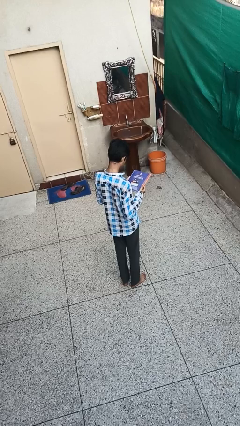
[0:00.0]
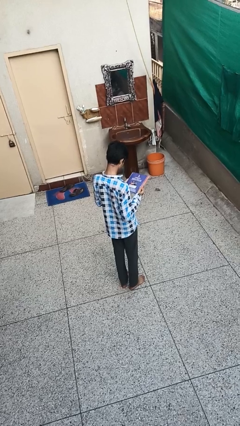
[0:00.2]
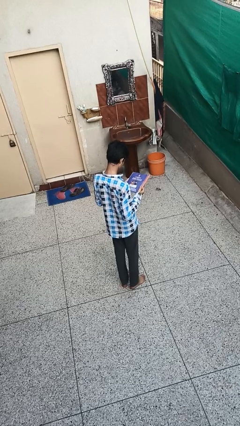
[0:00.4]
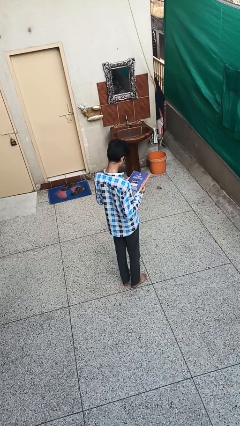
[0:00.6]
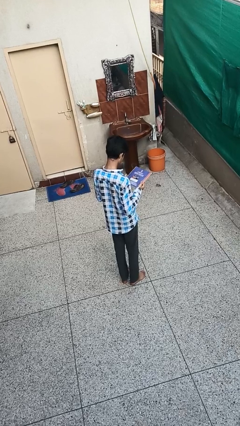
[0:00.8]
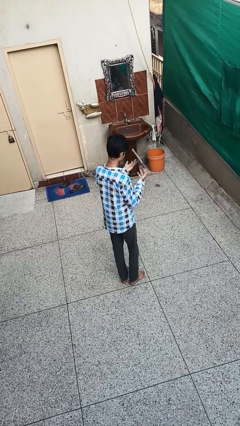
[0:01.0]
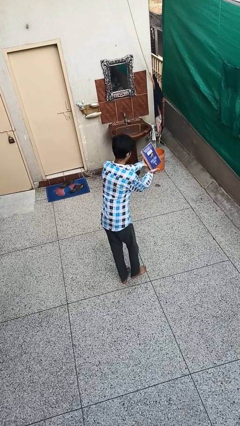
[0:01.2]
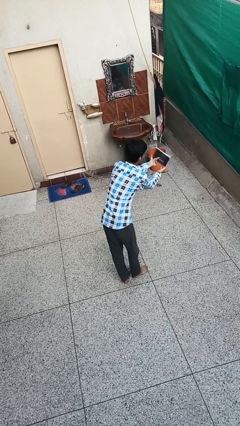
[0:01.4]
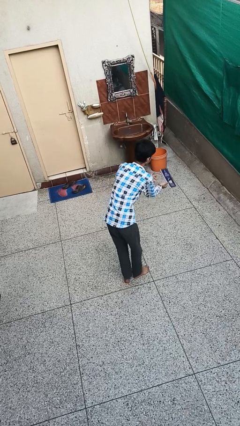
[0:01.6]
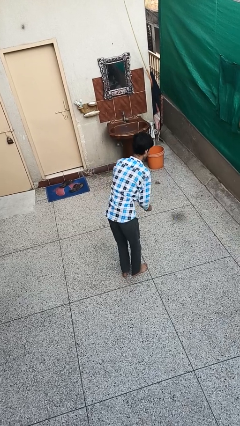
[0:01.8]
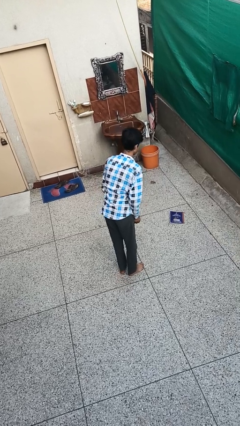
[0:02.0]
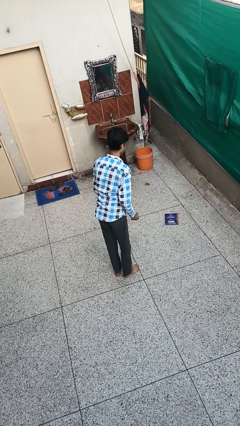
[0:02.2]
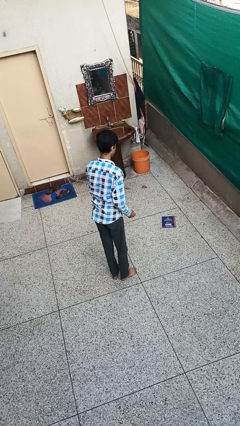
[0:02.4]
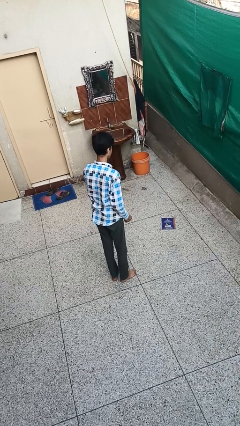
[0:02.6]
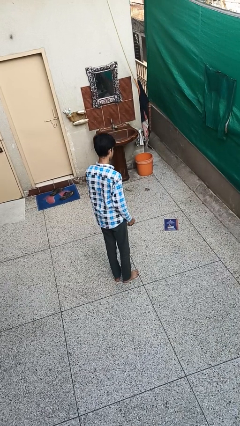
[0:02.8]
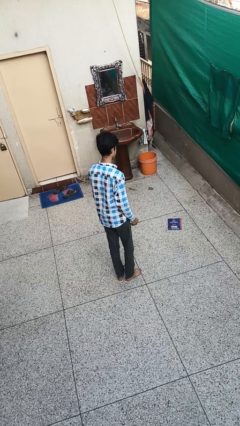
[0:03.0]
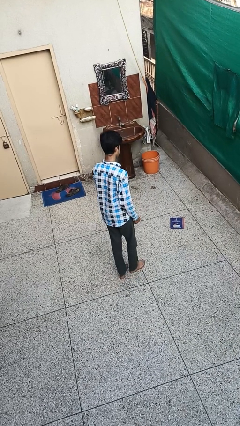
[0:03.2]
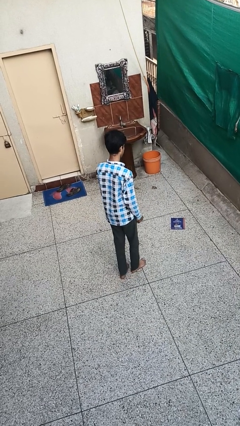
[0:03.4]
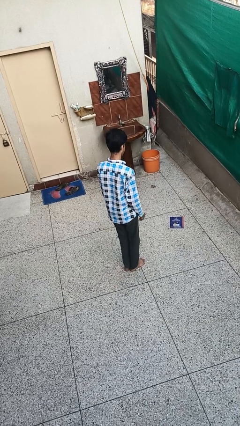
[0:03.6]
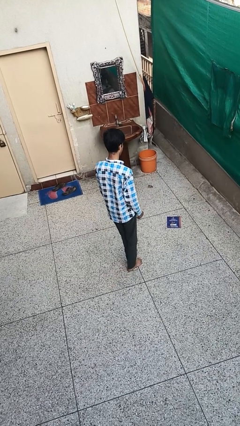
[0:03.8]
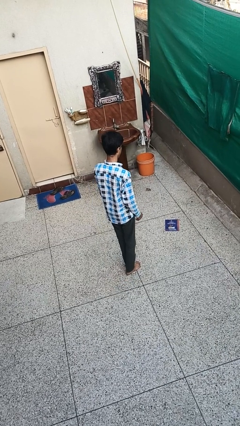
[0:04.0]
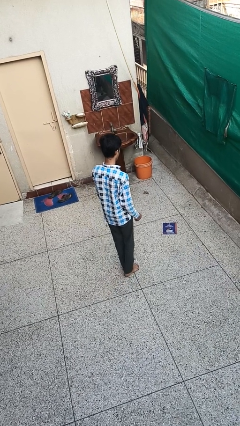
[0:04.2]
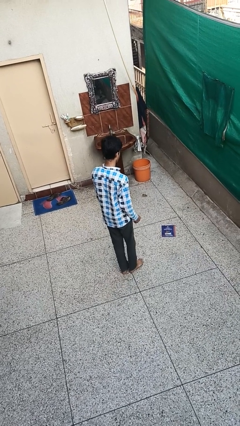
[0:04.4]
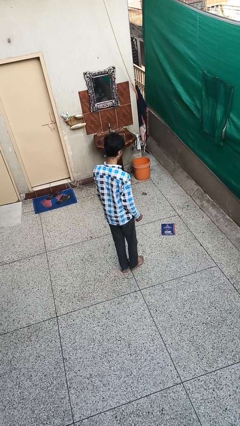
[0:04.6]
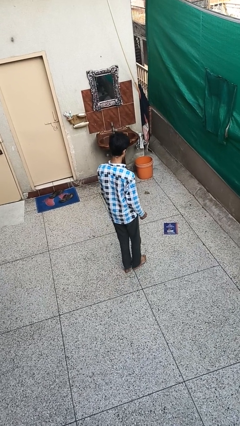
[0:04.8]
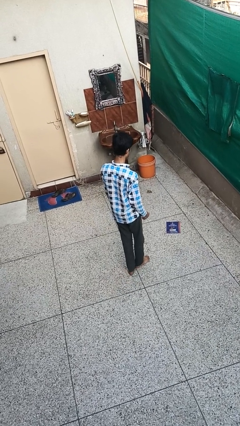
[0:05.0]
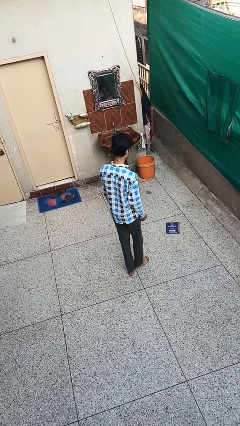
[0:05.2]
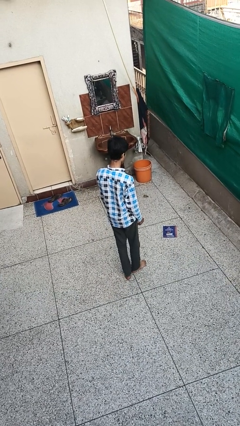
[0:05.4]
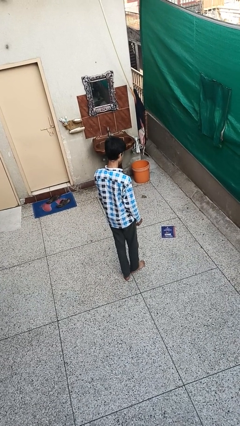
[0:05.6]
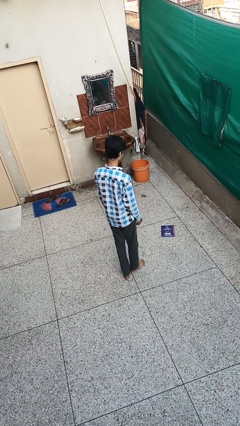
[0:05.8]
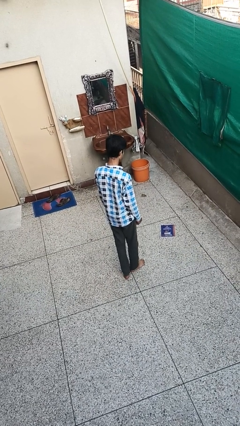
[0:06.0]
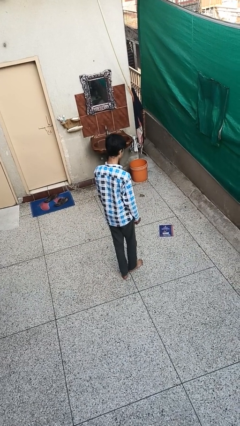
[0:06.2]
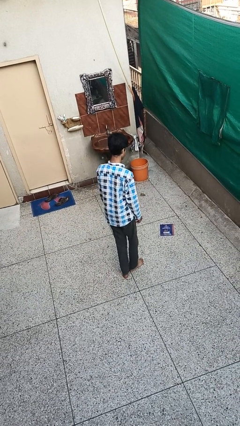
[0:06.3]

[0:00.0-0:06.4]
person drops object

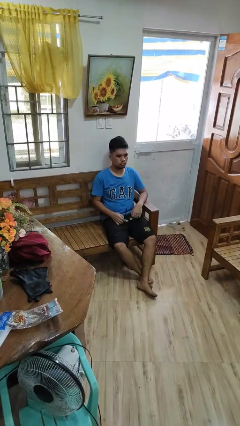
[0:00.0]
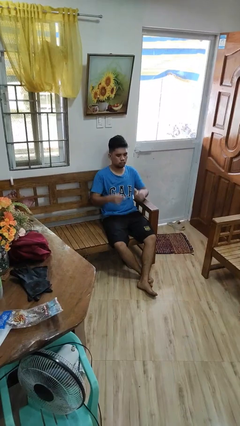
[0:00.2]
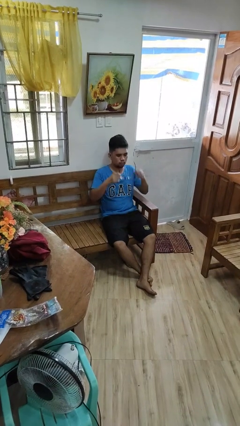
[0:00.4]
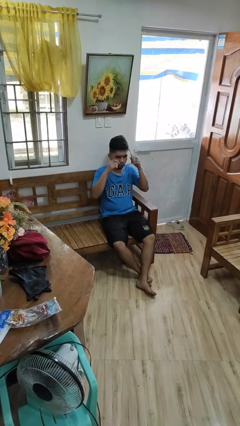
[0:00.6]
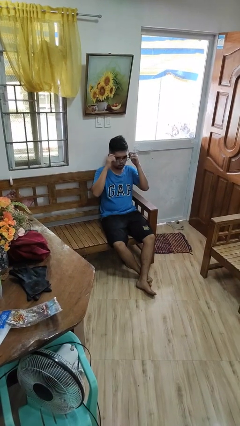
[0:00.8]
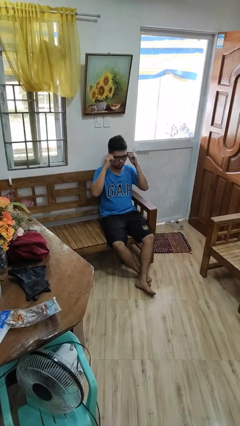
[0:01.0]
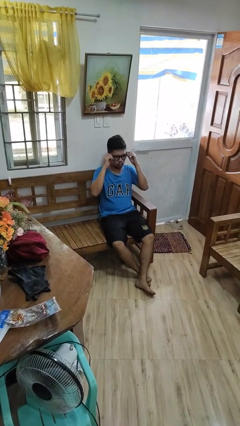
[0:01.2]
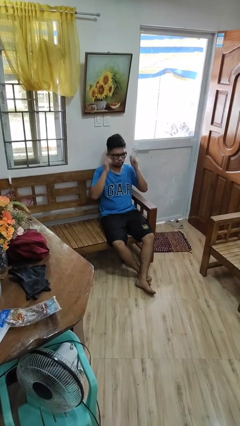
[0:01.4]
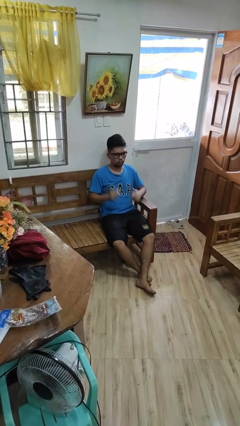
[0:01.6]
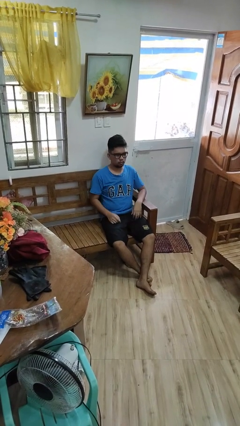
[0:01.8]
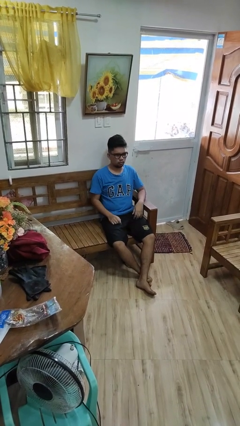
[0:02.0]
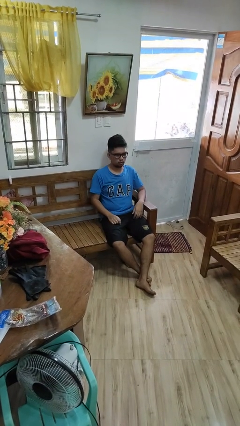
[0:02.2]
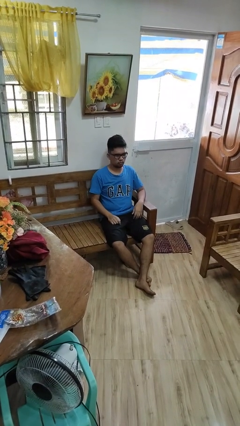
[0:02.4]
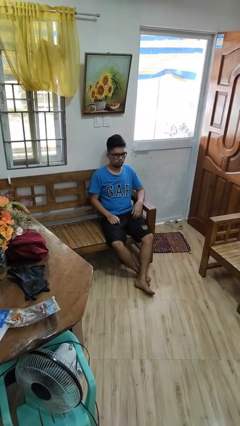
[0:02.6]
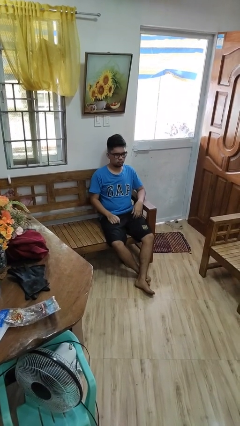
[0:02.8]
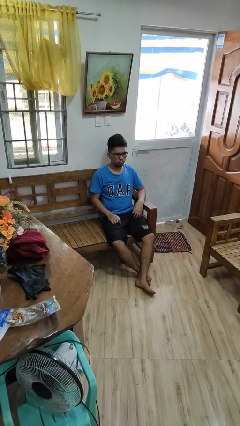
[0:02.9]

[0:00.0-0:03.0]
person puts on glasses

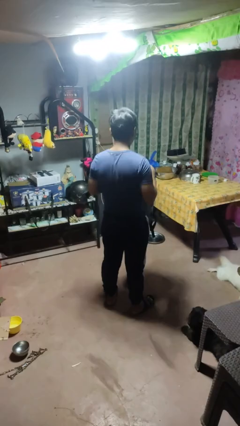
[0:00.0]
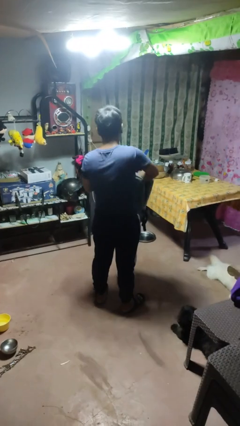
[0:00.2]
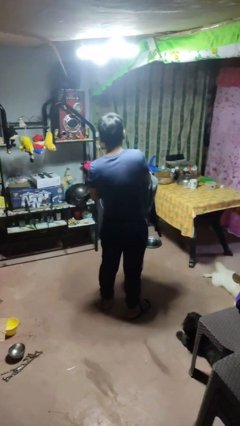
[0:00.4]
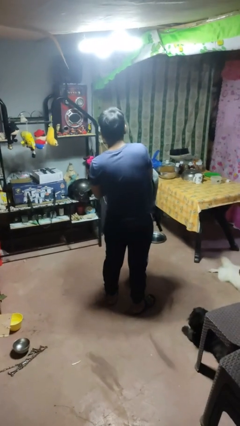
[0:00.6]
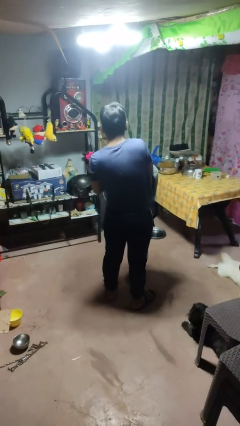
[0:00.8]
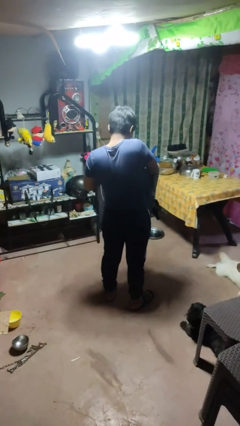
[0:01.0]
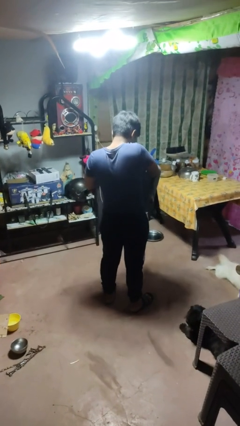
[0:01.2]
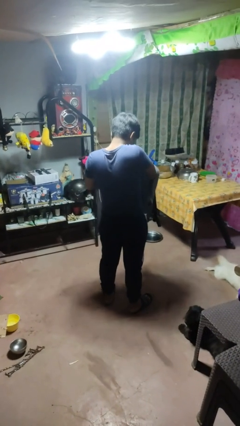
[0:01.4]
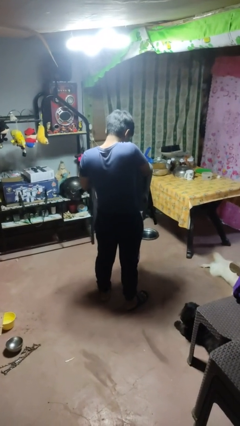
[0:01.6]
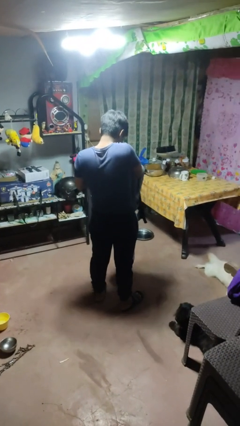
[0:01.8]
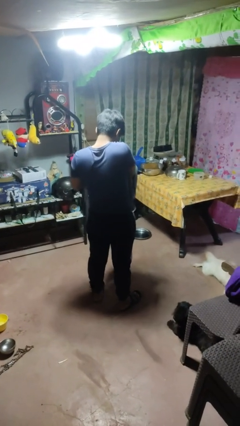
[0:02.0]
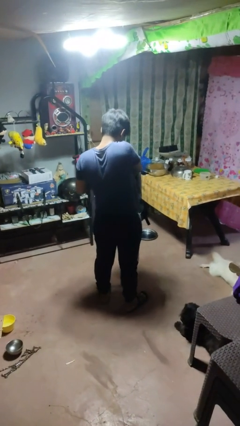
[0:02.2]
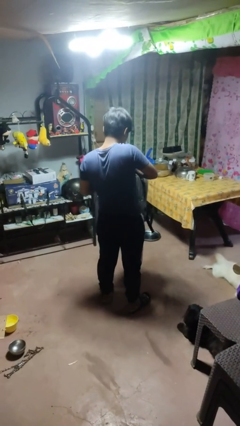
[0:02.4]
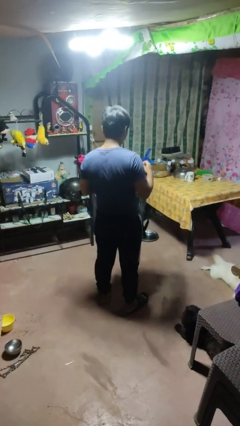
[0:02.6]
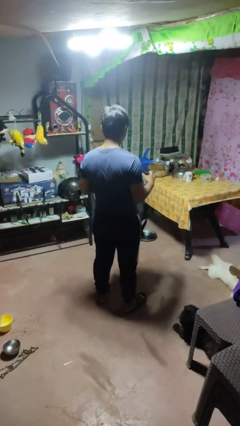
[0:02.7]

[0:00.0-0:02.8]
person searches in bag

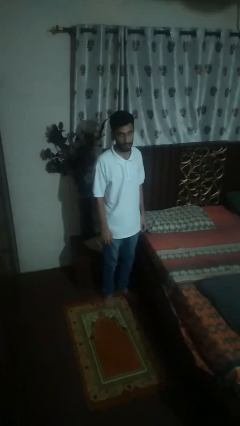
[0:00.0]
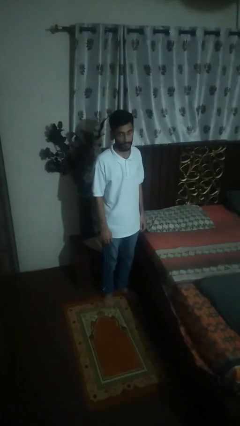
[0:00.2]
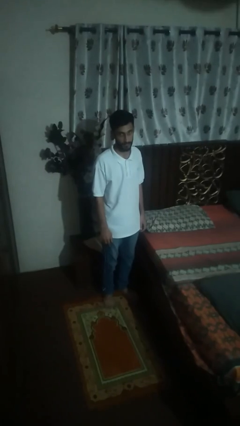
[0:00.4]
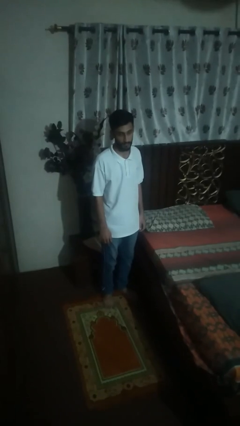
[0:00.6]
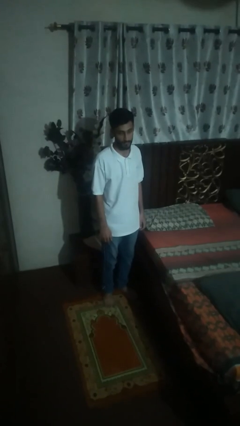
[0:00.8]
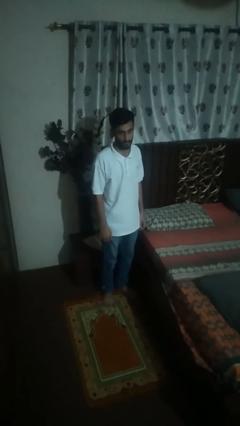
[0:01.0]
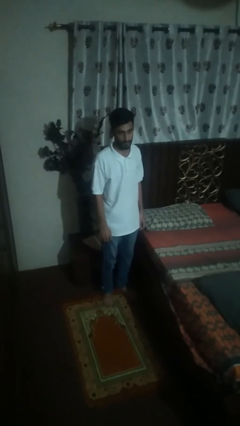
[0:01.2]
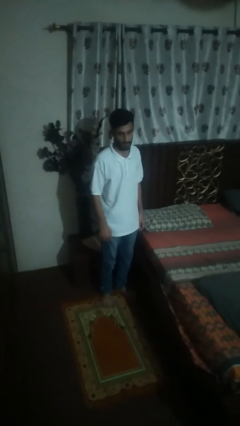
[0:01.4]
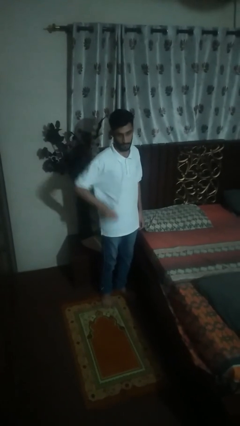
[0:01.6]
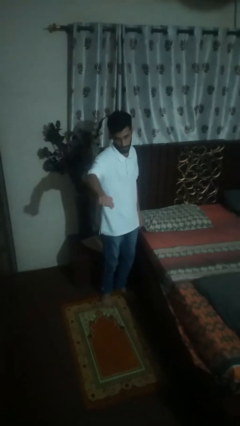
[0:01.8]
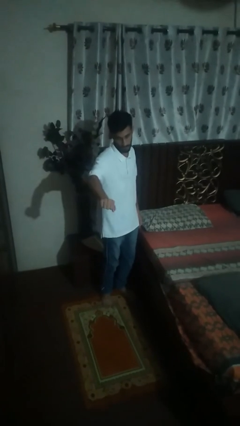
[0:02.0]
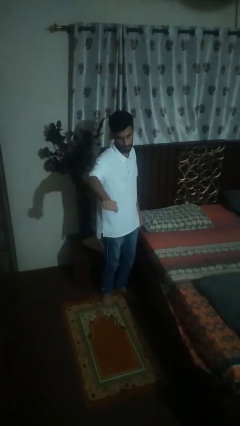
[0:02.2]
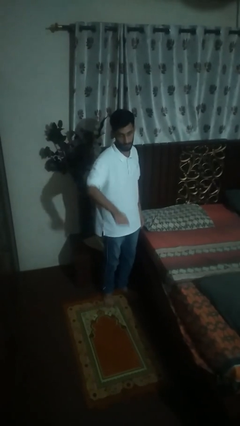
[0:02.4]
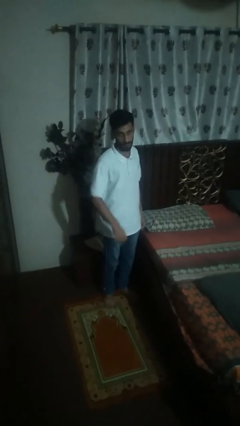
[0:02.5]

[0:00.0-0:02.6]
person karate chop

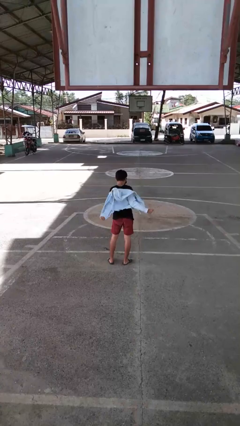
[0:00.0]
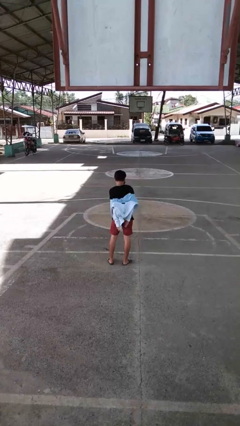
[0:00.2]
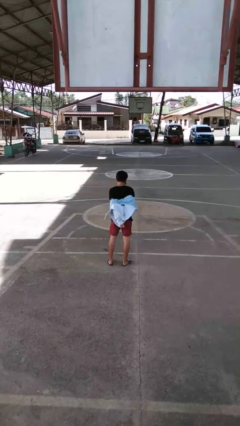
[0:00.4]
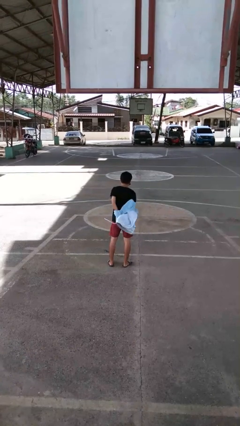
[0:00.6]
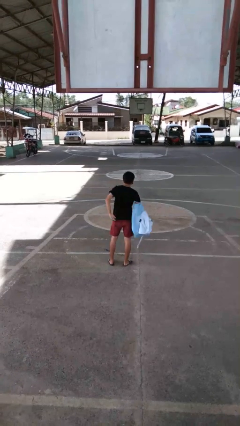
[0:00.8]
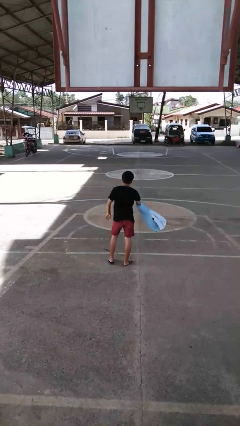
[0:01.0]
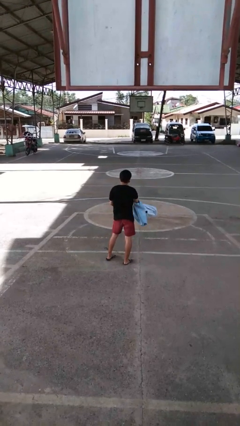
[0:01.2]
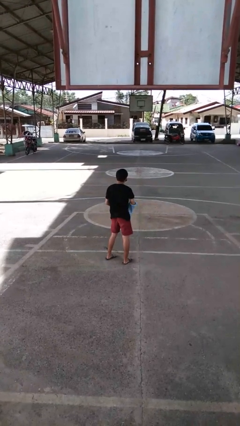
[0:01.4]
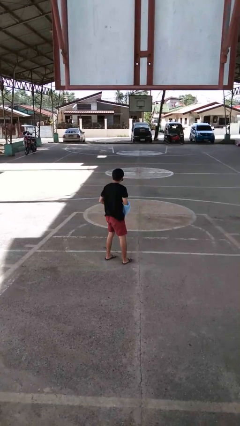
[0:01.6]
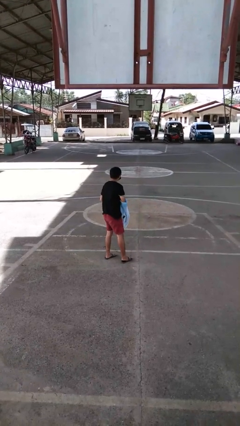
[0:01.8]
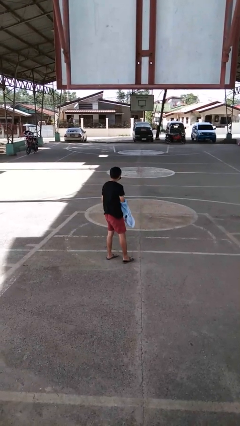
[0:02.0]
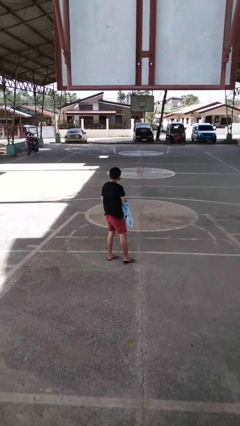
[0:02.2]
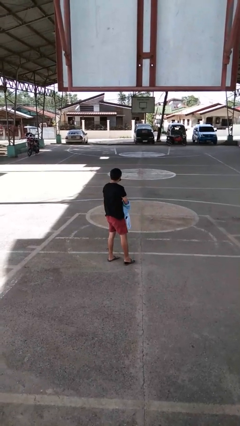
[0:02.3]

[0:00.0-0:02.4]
person takes off jacket
